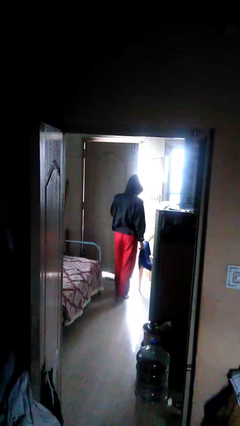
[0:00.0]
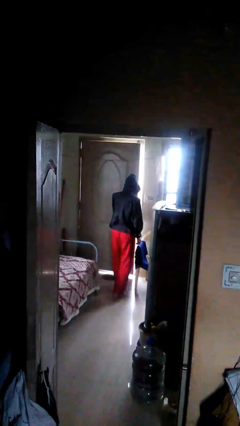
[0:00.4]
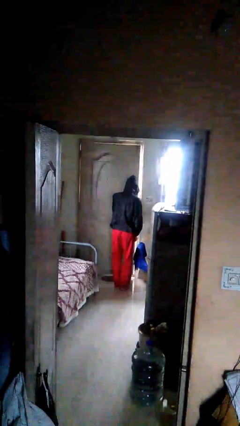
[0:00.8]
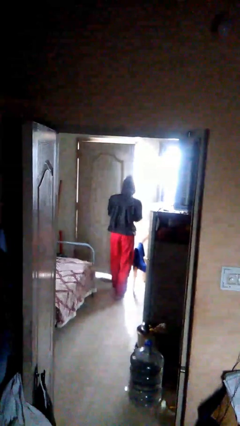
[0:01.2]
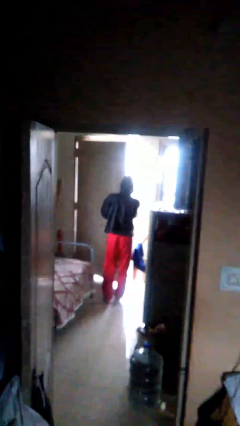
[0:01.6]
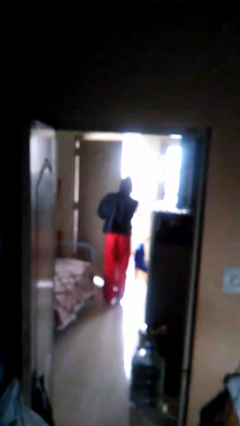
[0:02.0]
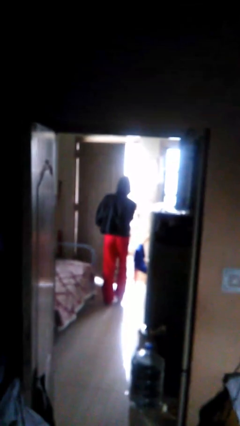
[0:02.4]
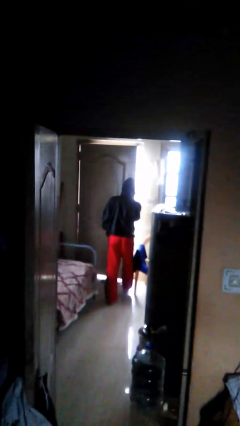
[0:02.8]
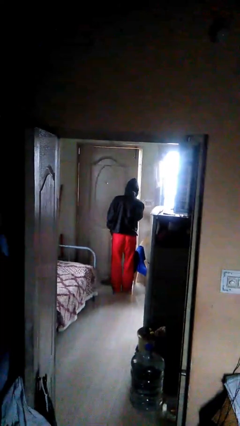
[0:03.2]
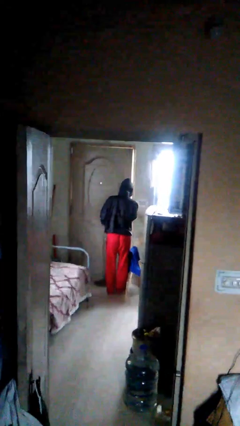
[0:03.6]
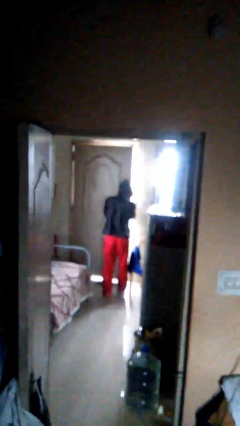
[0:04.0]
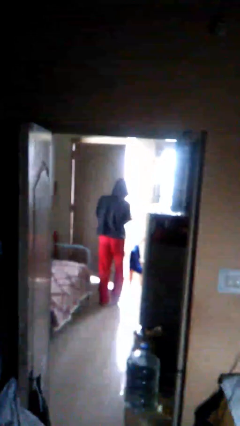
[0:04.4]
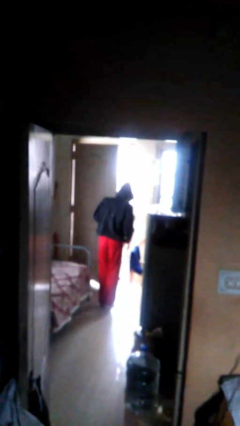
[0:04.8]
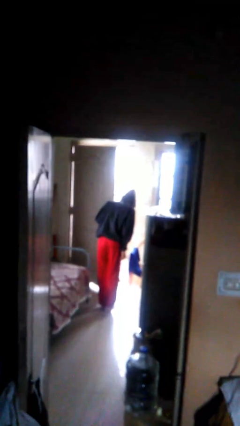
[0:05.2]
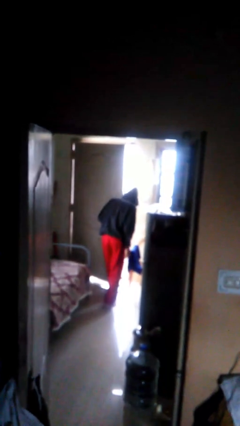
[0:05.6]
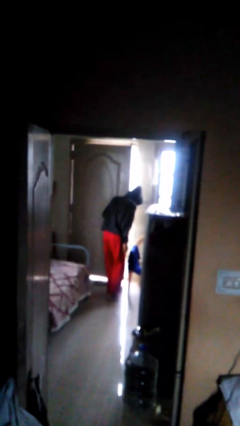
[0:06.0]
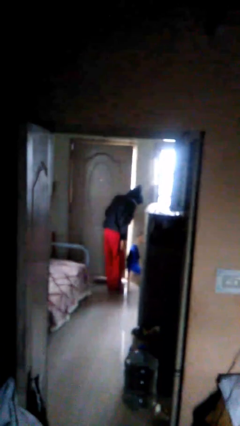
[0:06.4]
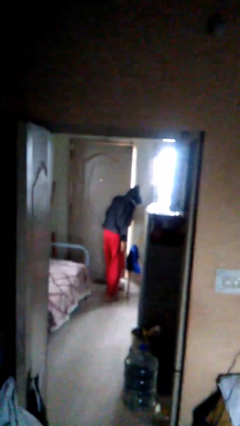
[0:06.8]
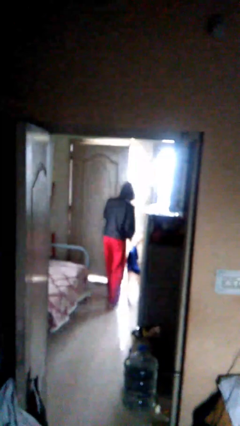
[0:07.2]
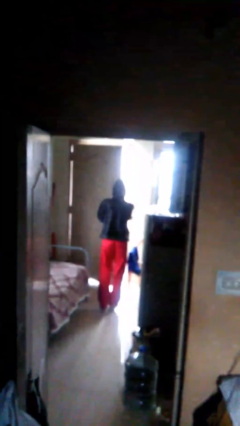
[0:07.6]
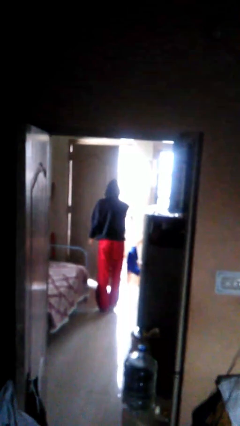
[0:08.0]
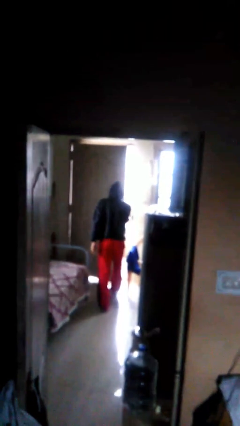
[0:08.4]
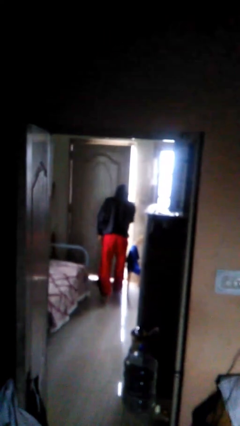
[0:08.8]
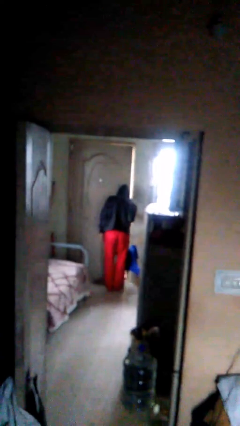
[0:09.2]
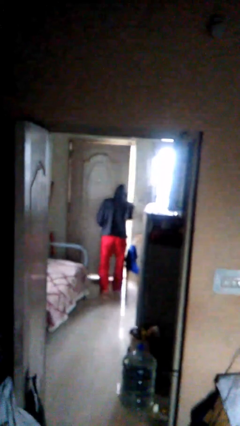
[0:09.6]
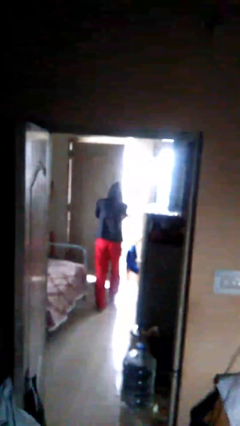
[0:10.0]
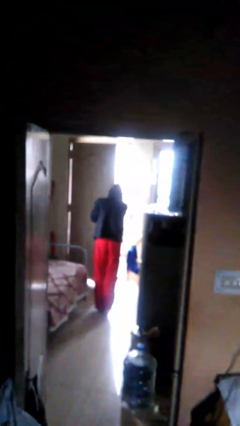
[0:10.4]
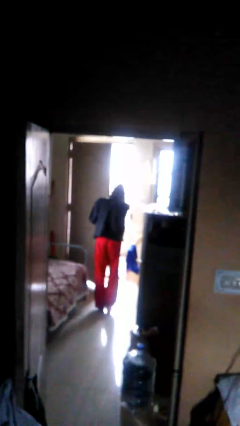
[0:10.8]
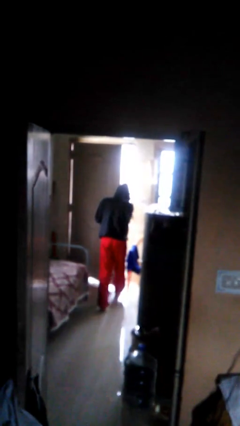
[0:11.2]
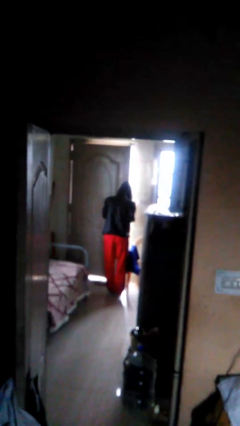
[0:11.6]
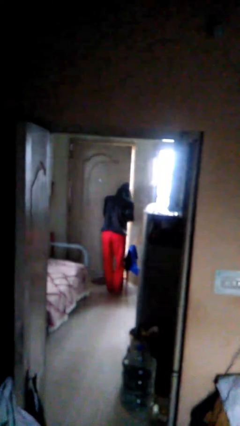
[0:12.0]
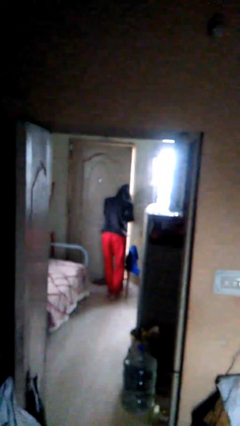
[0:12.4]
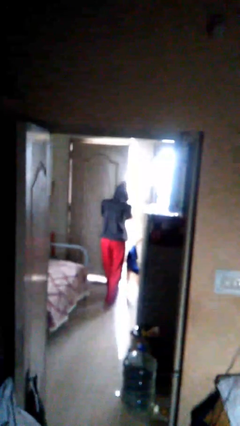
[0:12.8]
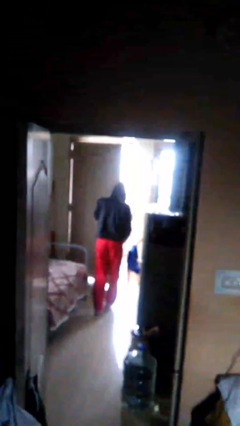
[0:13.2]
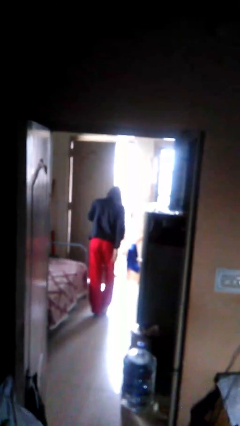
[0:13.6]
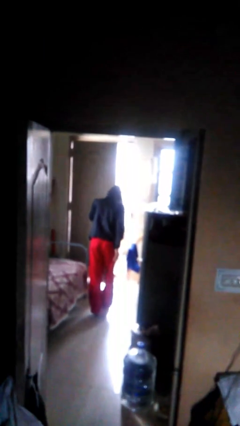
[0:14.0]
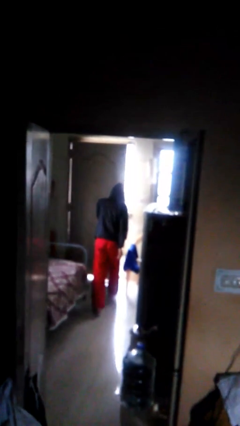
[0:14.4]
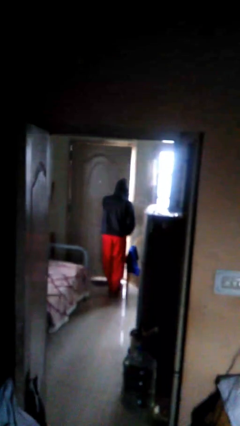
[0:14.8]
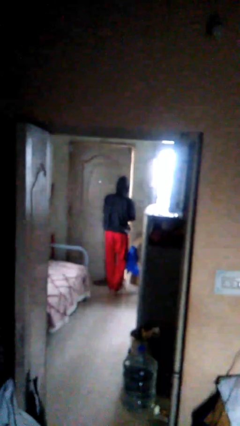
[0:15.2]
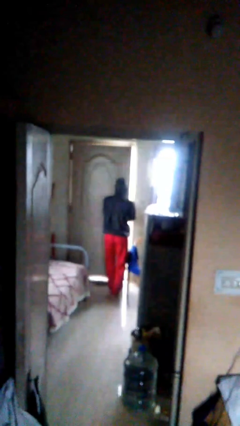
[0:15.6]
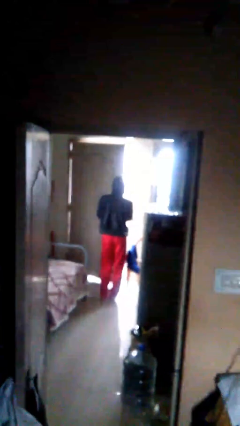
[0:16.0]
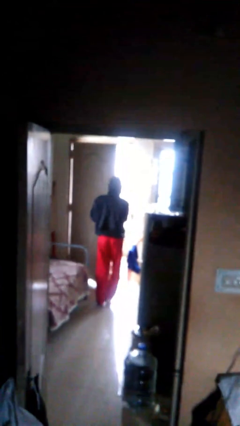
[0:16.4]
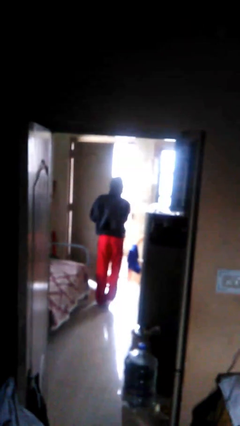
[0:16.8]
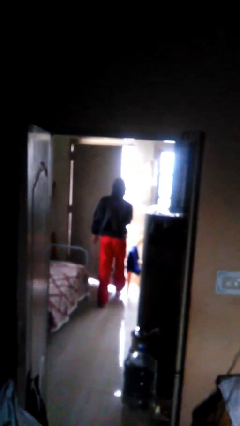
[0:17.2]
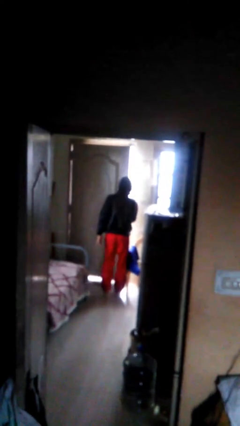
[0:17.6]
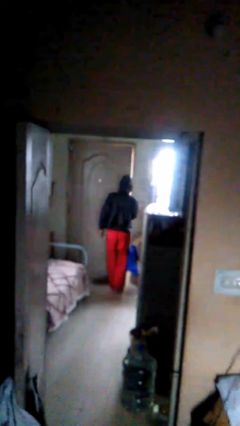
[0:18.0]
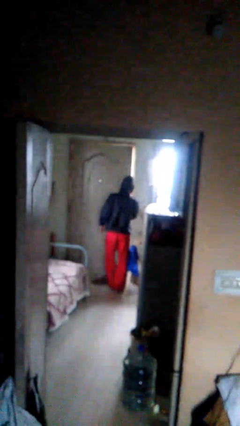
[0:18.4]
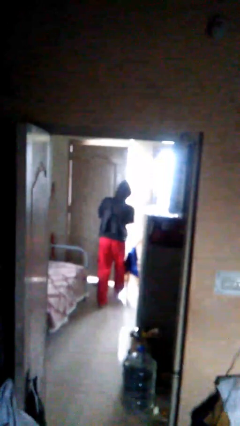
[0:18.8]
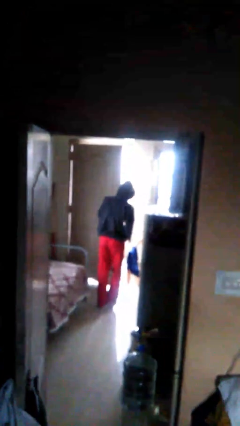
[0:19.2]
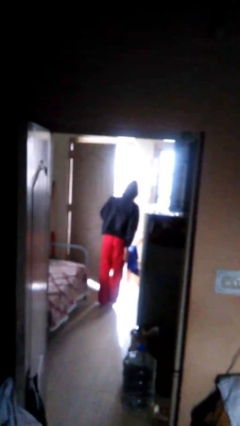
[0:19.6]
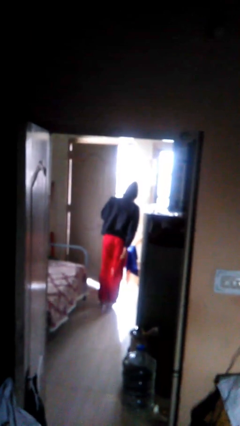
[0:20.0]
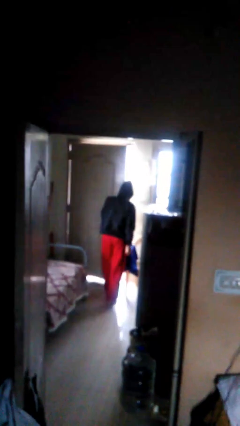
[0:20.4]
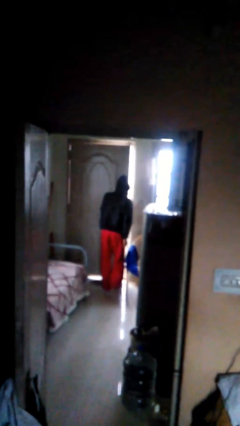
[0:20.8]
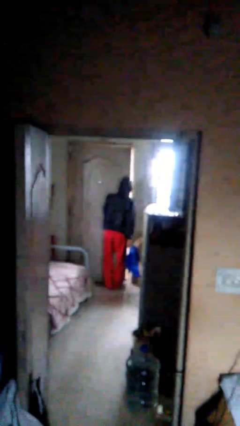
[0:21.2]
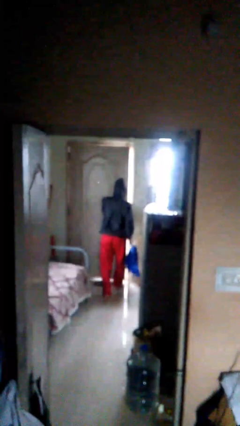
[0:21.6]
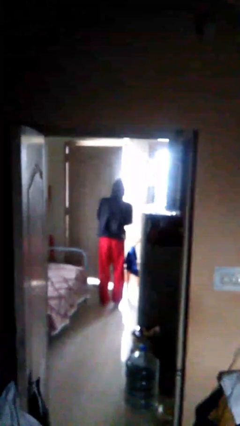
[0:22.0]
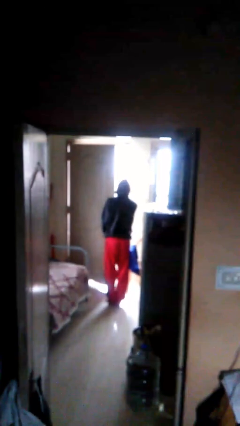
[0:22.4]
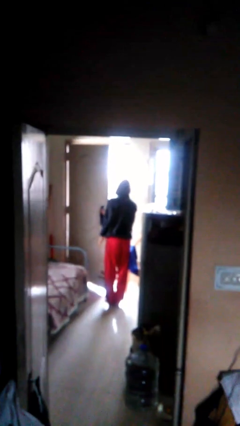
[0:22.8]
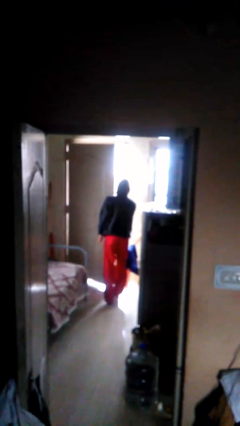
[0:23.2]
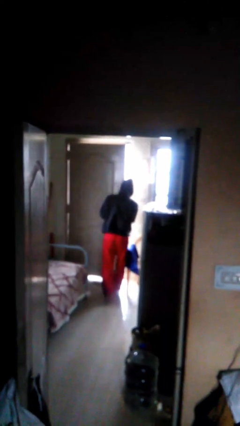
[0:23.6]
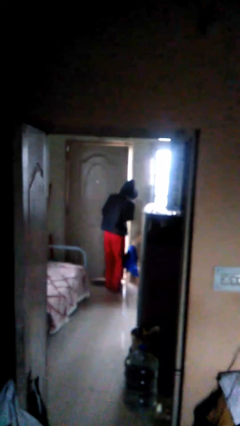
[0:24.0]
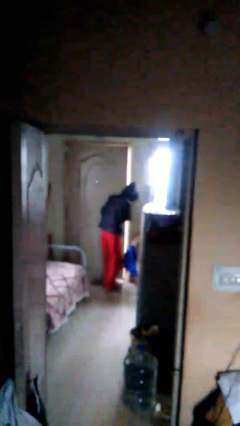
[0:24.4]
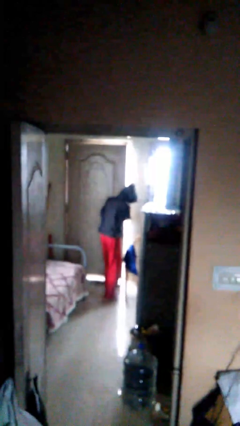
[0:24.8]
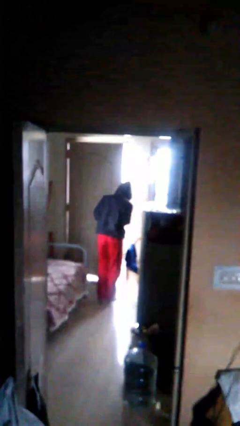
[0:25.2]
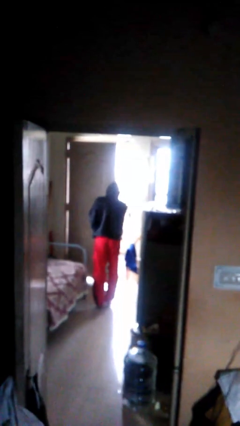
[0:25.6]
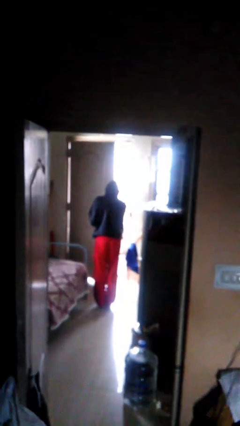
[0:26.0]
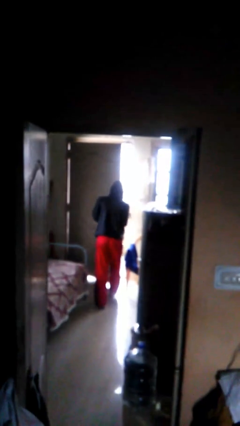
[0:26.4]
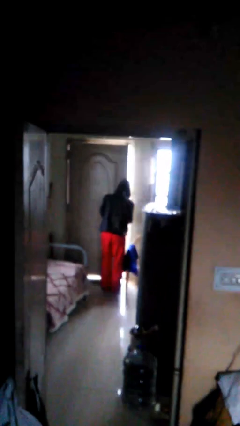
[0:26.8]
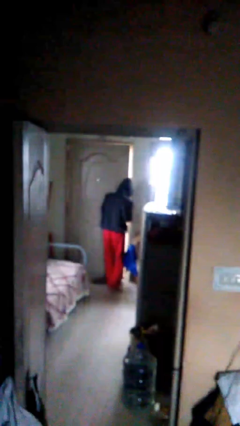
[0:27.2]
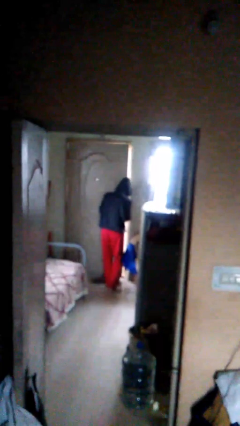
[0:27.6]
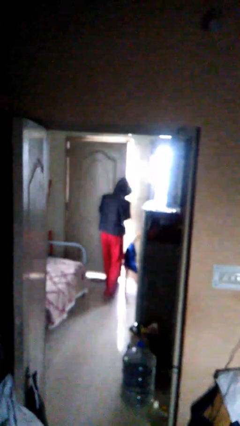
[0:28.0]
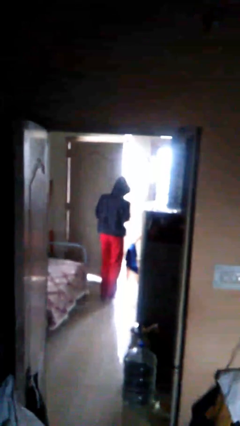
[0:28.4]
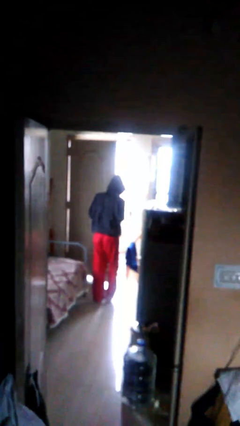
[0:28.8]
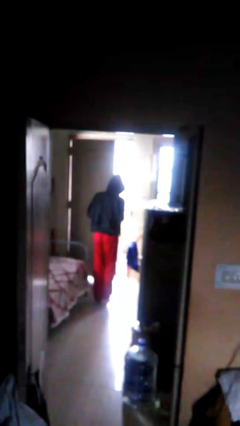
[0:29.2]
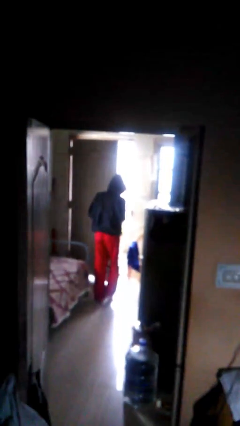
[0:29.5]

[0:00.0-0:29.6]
person closes facility door

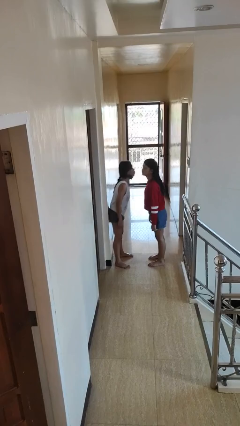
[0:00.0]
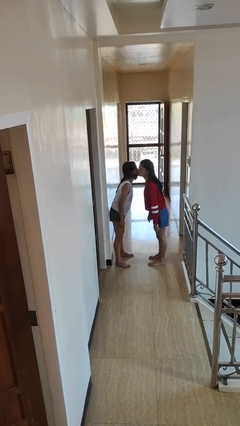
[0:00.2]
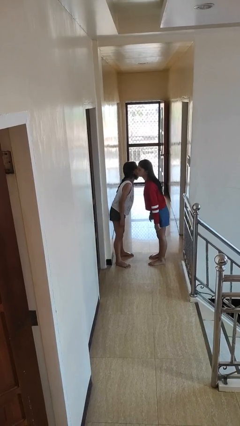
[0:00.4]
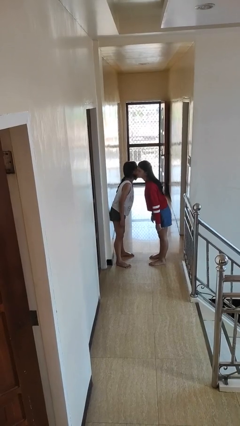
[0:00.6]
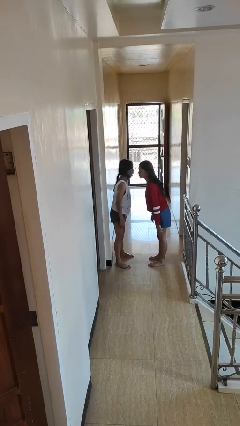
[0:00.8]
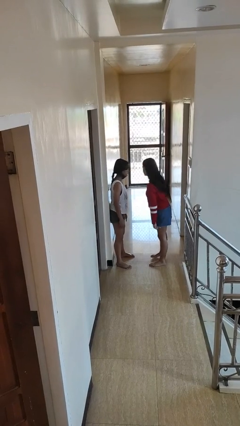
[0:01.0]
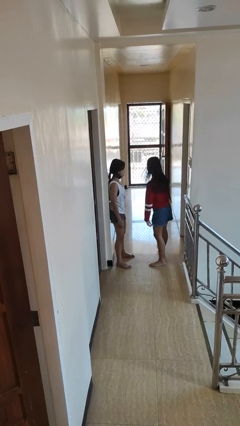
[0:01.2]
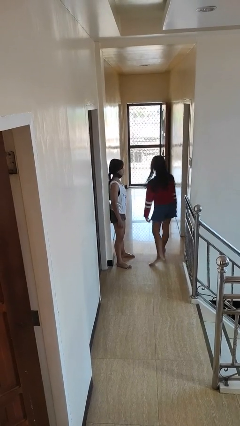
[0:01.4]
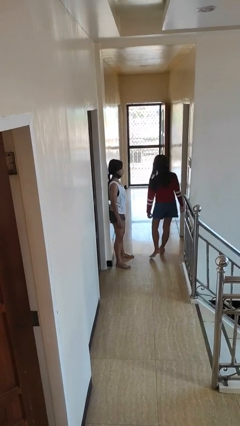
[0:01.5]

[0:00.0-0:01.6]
person kisses cheek of person

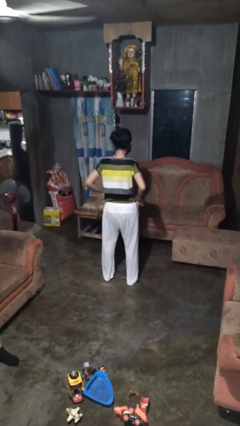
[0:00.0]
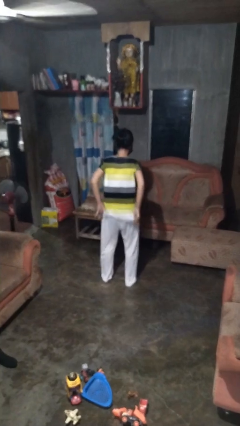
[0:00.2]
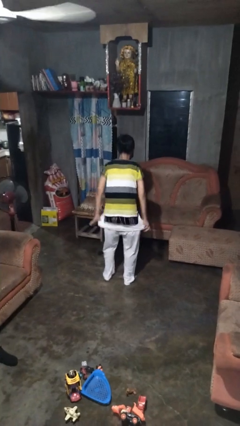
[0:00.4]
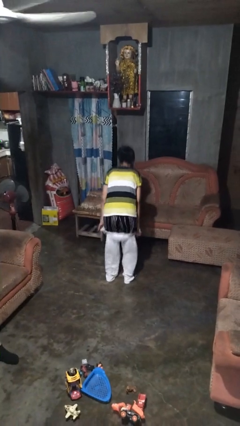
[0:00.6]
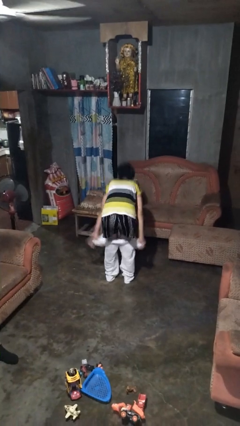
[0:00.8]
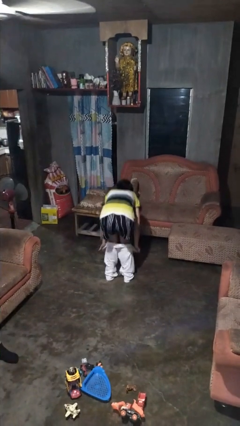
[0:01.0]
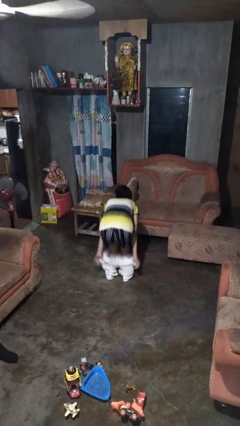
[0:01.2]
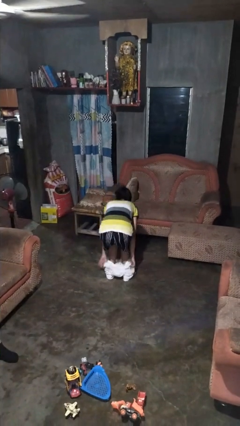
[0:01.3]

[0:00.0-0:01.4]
person takes off pants
